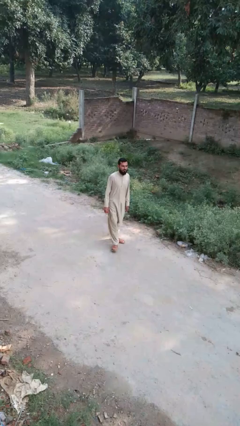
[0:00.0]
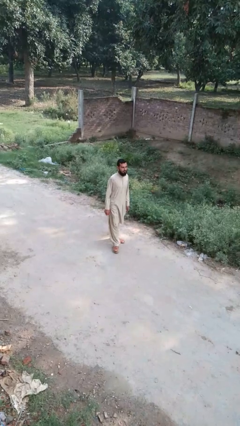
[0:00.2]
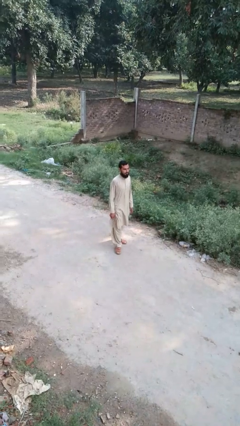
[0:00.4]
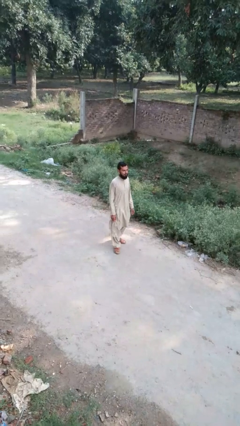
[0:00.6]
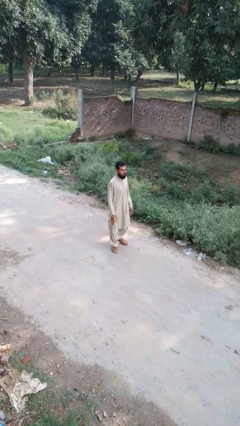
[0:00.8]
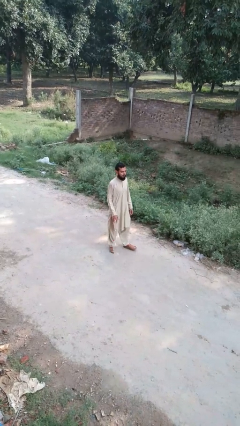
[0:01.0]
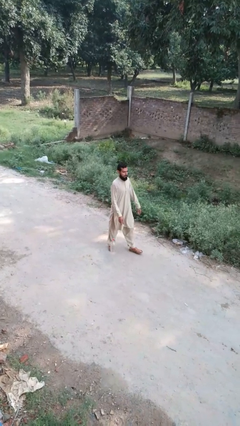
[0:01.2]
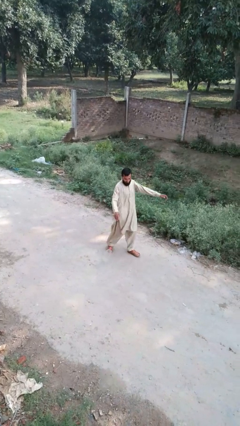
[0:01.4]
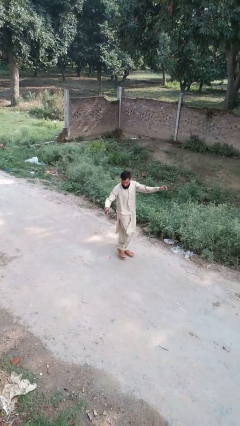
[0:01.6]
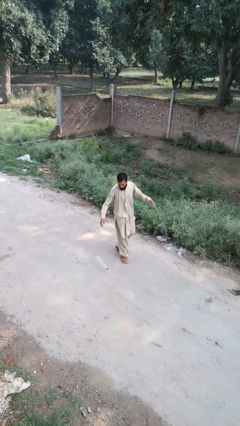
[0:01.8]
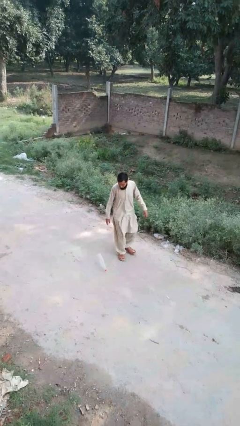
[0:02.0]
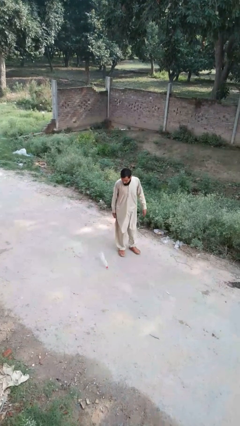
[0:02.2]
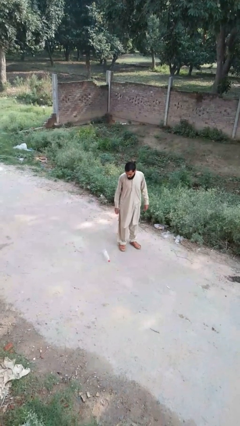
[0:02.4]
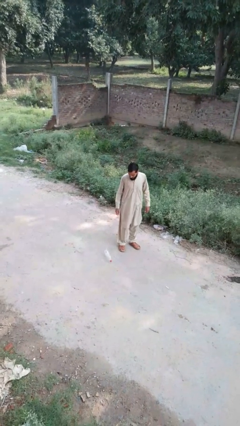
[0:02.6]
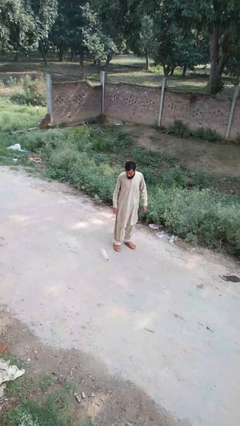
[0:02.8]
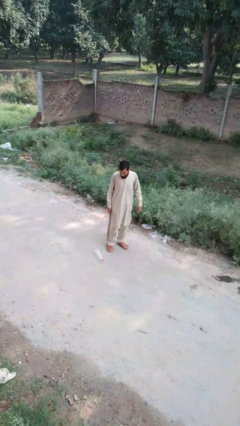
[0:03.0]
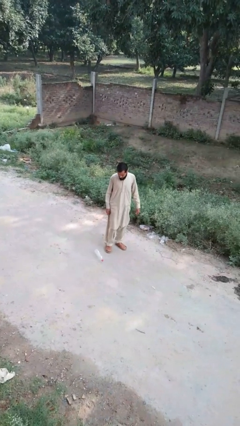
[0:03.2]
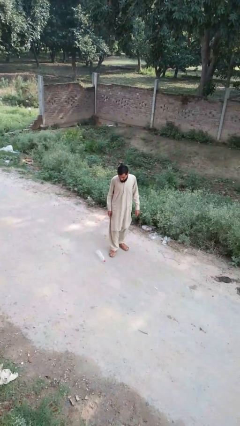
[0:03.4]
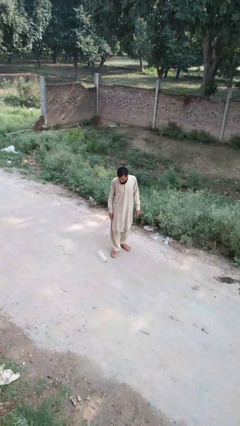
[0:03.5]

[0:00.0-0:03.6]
person drops object

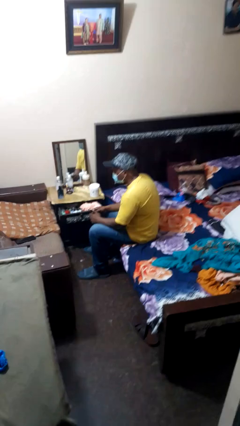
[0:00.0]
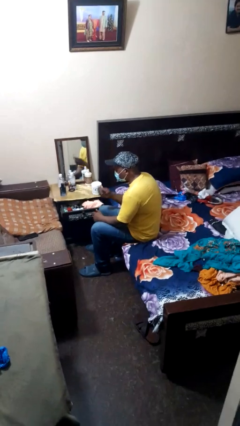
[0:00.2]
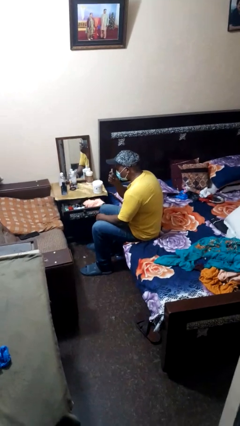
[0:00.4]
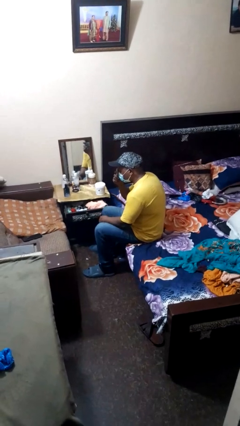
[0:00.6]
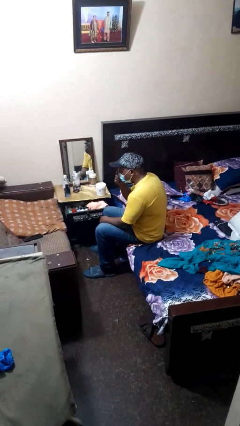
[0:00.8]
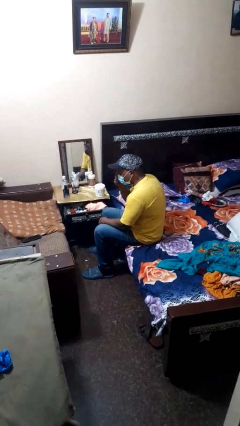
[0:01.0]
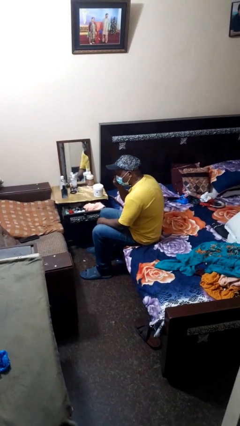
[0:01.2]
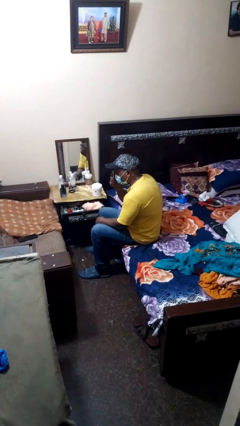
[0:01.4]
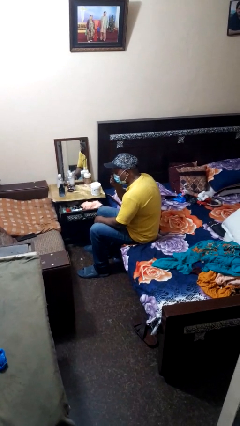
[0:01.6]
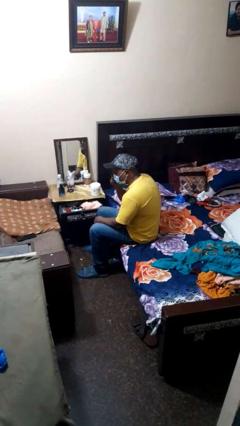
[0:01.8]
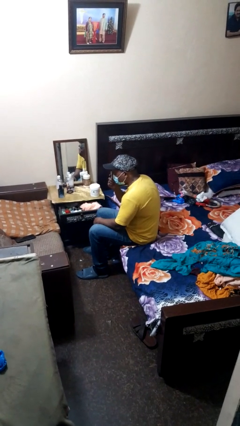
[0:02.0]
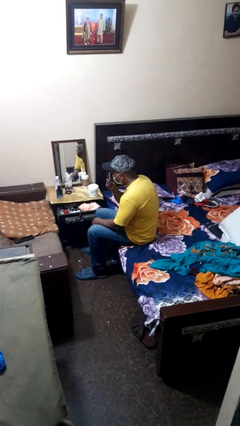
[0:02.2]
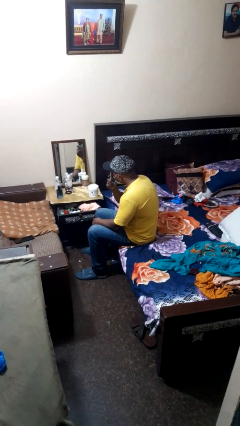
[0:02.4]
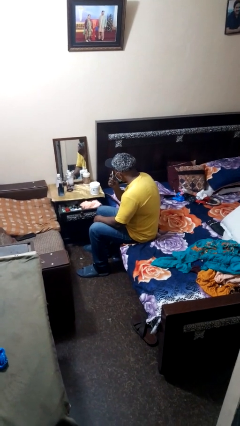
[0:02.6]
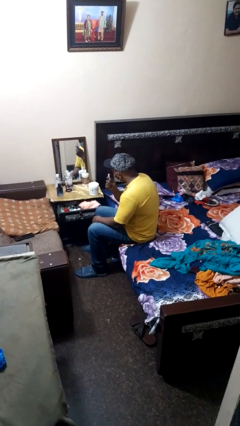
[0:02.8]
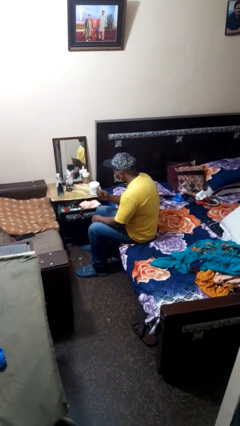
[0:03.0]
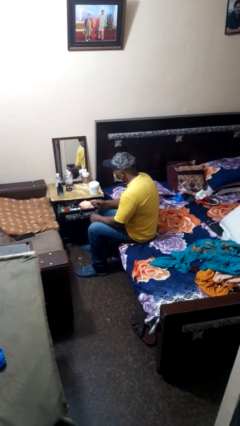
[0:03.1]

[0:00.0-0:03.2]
person applies eye makeup

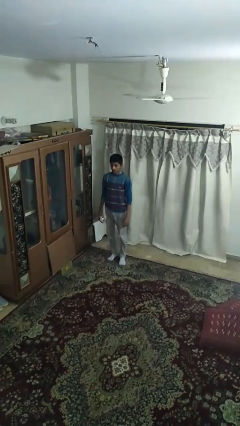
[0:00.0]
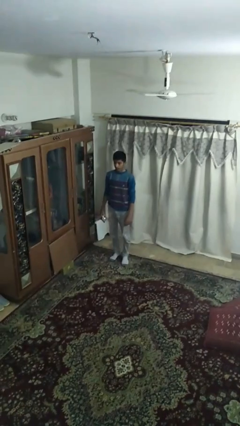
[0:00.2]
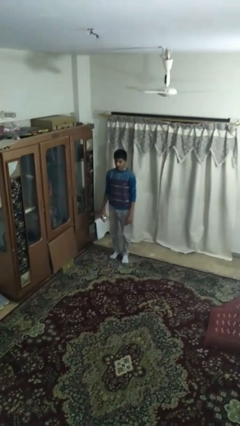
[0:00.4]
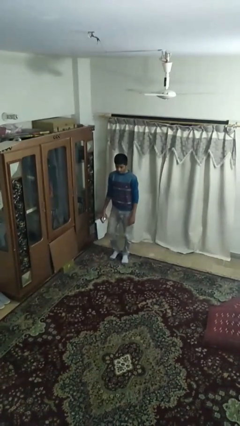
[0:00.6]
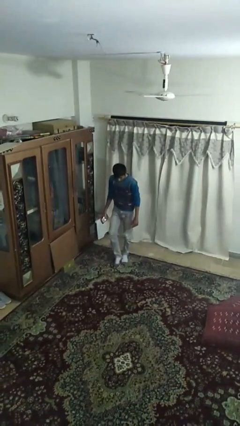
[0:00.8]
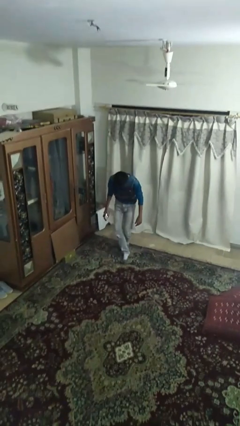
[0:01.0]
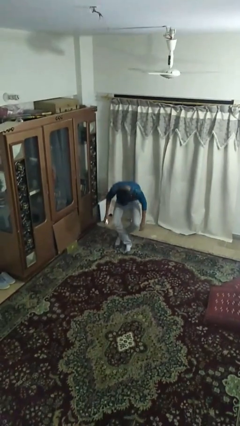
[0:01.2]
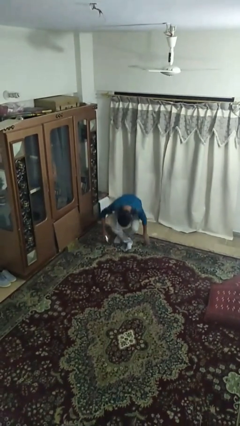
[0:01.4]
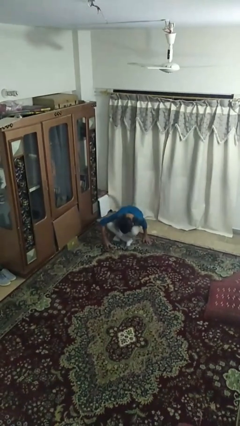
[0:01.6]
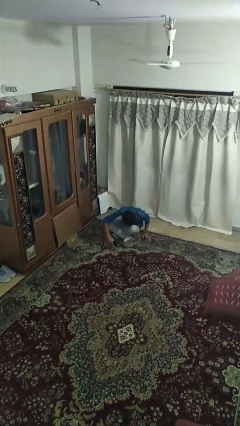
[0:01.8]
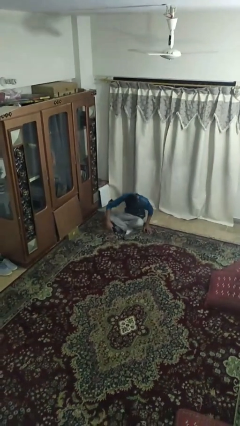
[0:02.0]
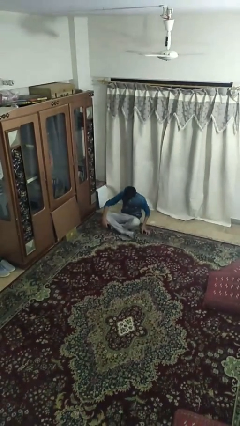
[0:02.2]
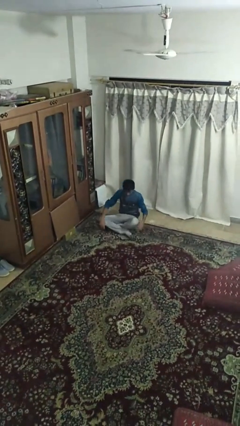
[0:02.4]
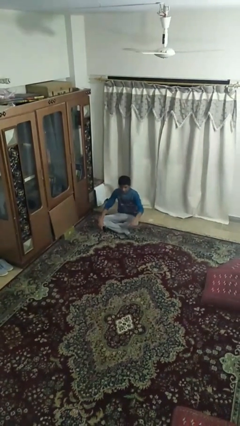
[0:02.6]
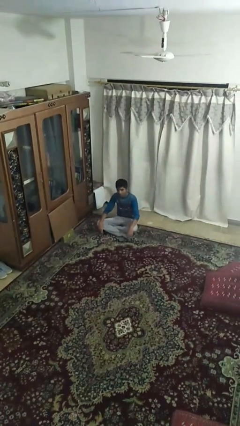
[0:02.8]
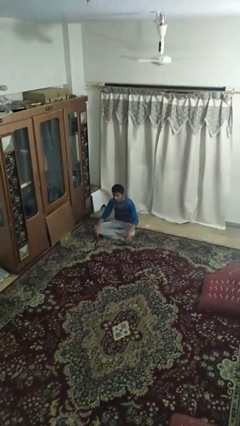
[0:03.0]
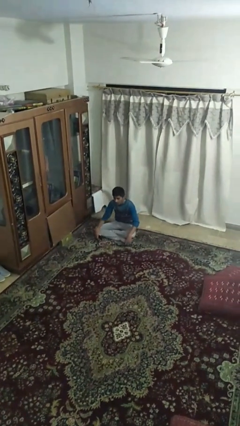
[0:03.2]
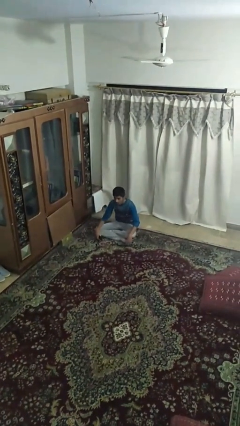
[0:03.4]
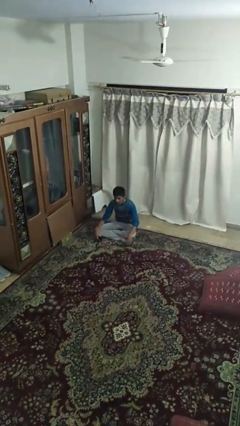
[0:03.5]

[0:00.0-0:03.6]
person sits down

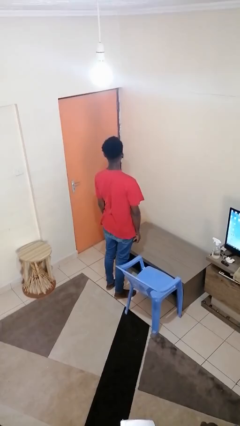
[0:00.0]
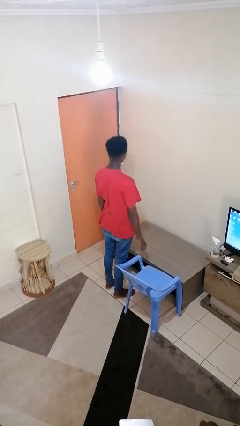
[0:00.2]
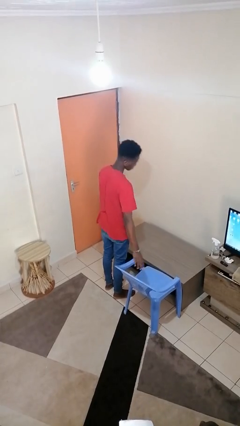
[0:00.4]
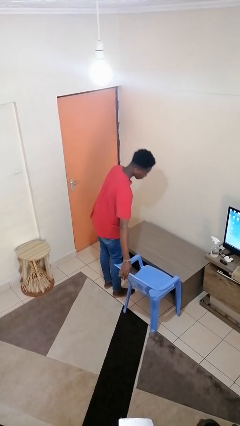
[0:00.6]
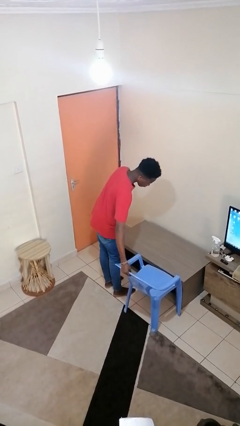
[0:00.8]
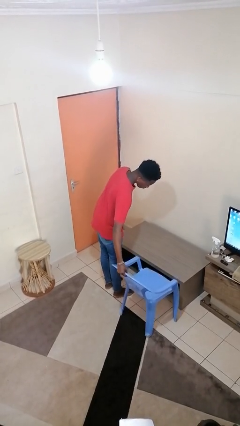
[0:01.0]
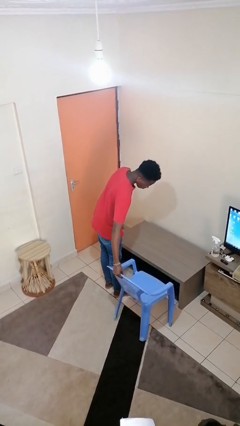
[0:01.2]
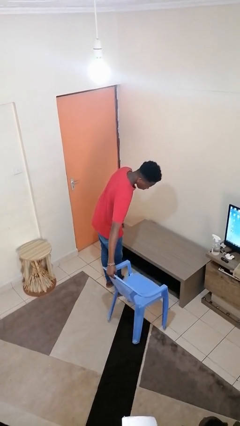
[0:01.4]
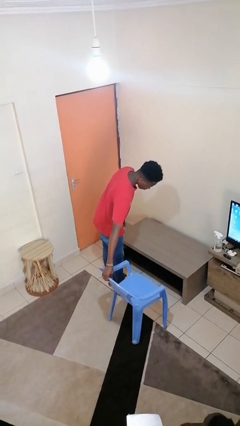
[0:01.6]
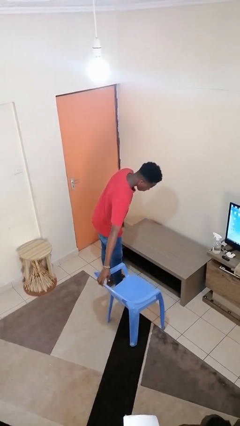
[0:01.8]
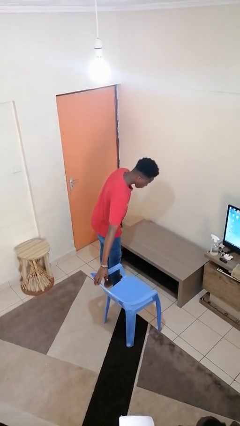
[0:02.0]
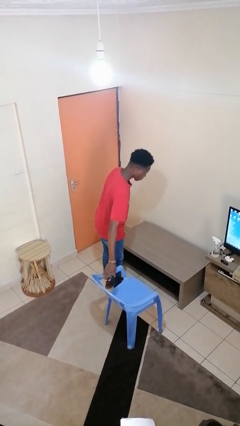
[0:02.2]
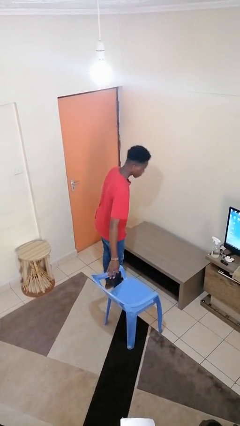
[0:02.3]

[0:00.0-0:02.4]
person pulls out chair

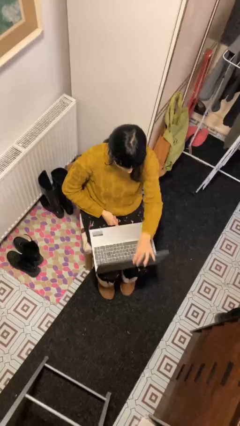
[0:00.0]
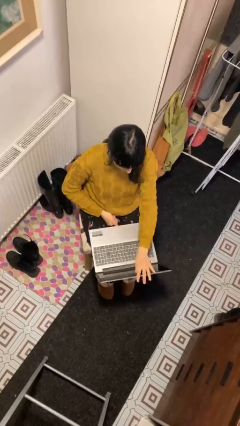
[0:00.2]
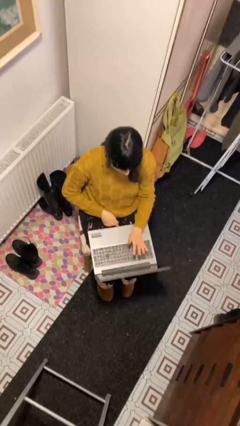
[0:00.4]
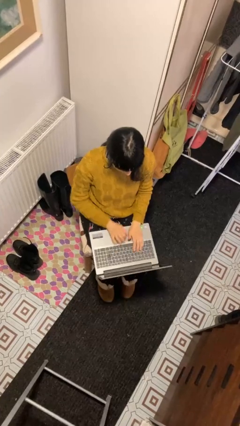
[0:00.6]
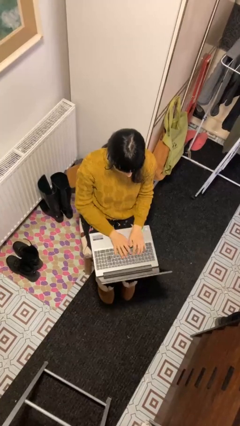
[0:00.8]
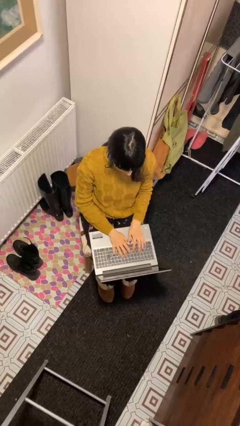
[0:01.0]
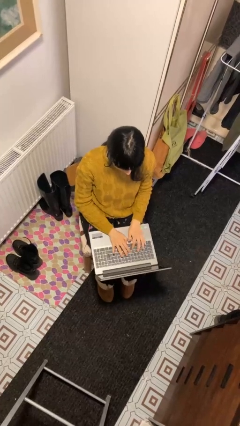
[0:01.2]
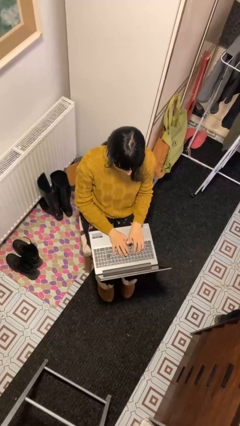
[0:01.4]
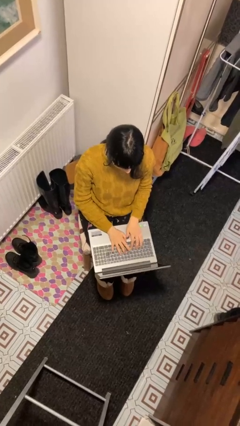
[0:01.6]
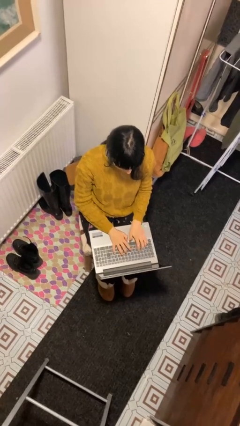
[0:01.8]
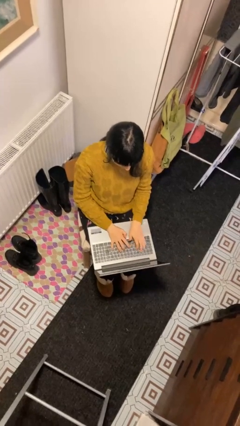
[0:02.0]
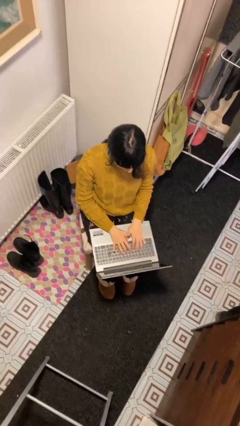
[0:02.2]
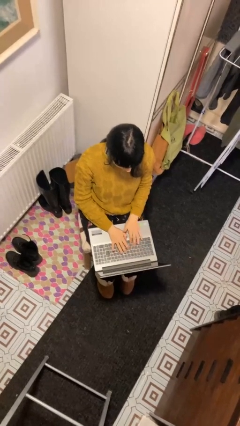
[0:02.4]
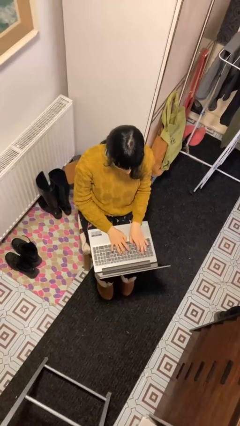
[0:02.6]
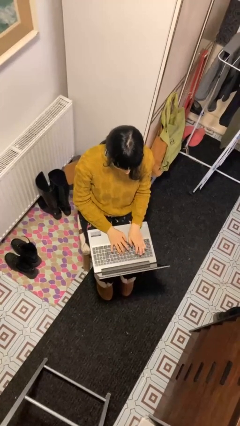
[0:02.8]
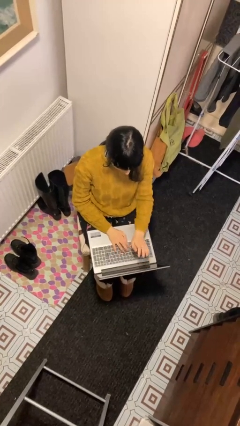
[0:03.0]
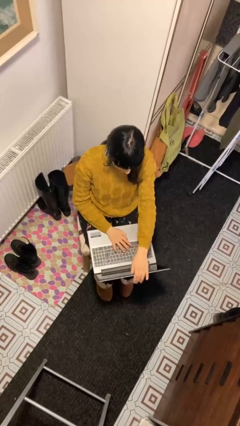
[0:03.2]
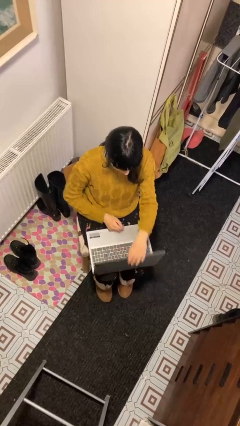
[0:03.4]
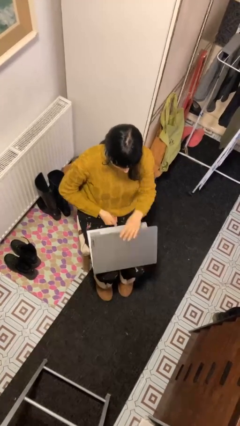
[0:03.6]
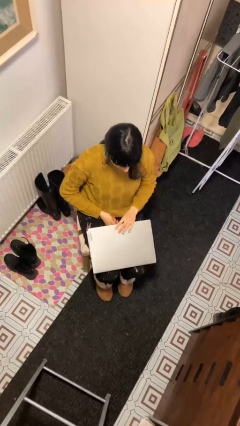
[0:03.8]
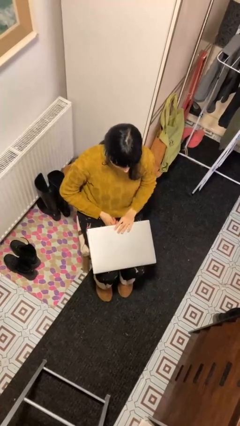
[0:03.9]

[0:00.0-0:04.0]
person interacts with laptop

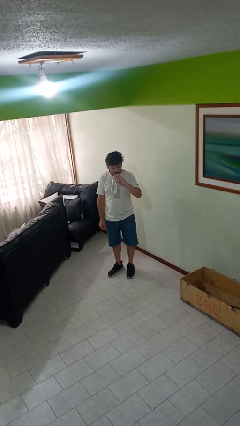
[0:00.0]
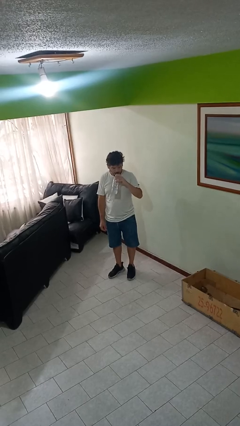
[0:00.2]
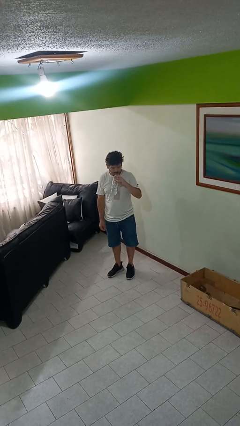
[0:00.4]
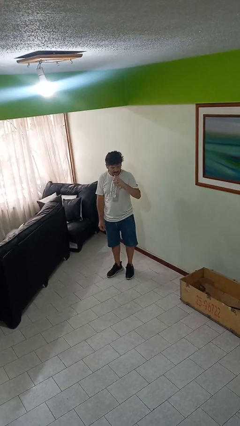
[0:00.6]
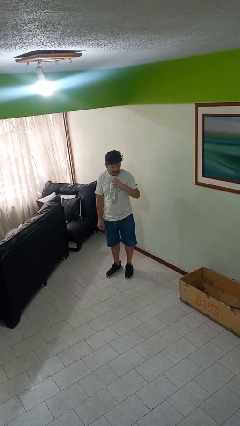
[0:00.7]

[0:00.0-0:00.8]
person drinks from straw
